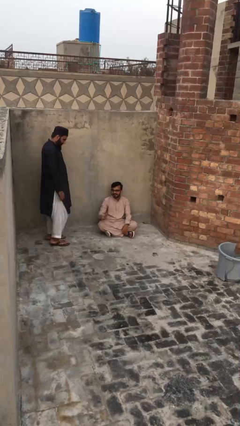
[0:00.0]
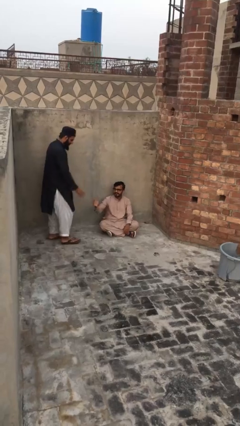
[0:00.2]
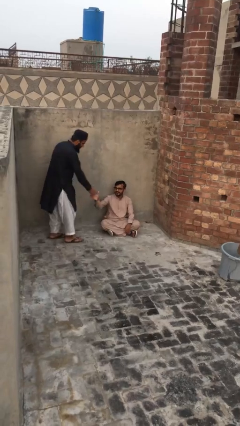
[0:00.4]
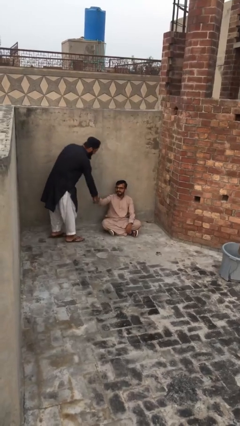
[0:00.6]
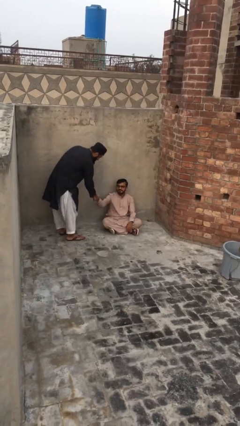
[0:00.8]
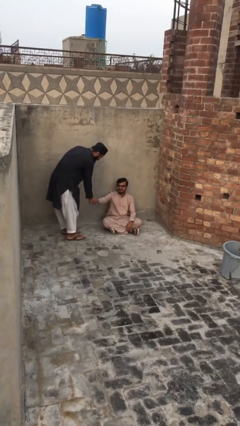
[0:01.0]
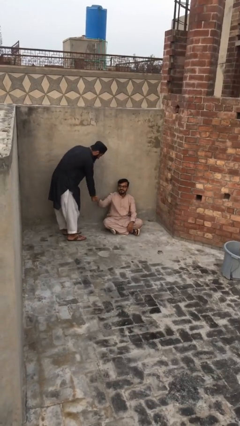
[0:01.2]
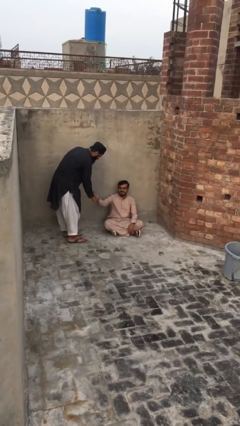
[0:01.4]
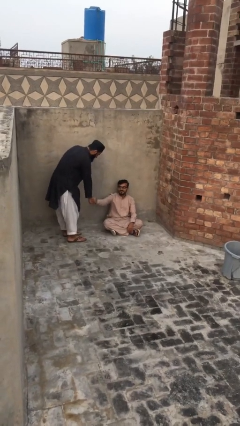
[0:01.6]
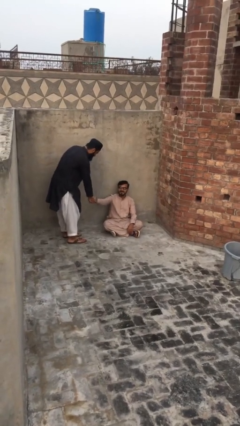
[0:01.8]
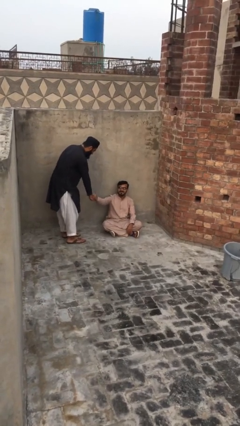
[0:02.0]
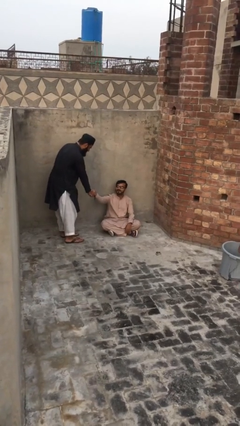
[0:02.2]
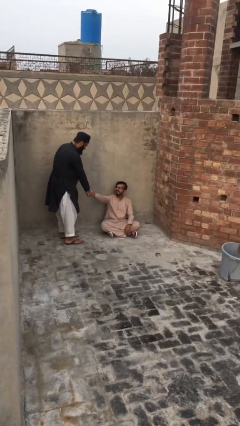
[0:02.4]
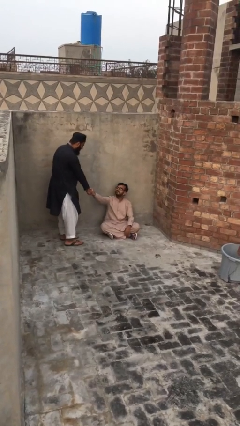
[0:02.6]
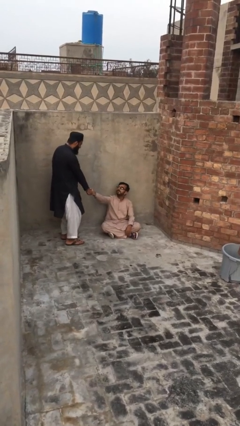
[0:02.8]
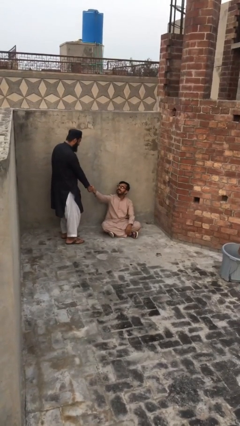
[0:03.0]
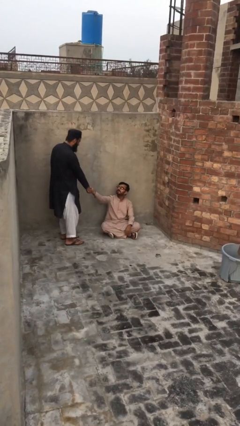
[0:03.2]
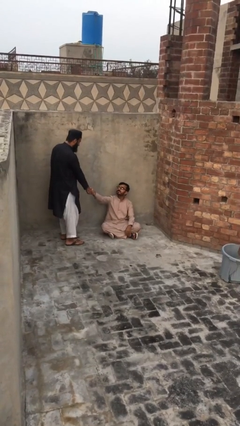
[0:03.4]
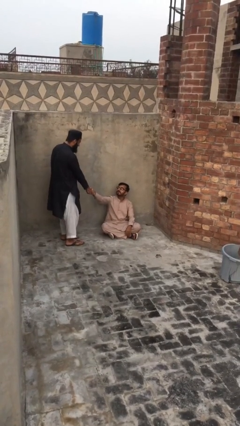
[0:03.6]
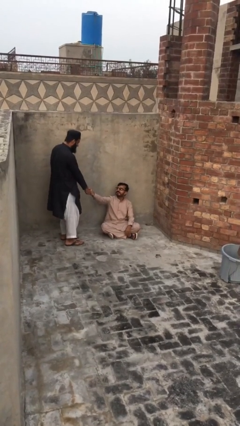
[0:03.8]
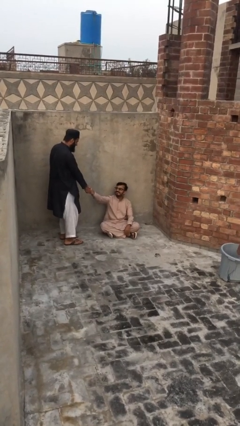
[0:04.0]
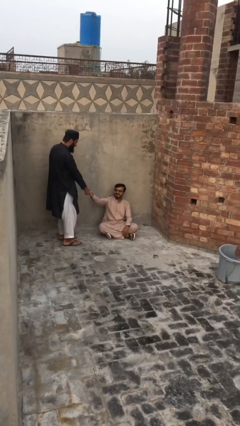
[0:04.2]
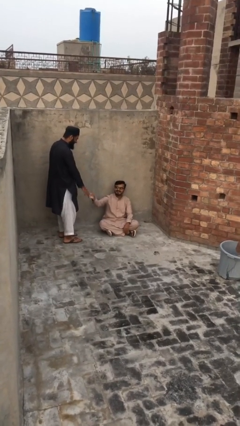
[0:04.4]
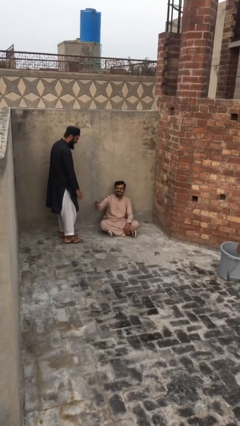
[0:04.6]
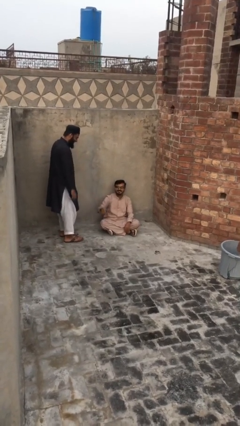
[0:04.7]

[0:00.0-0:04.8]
person shakes hand

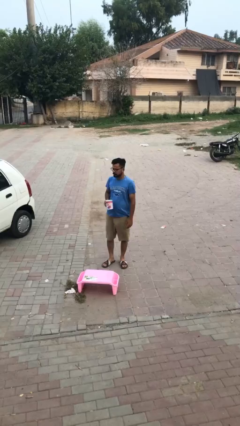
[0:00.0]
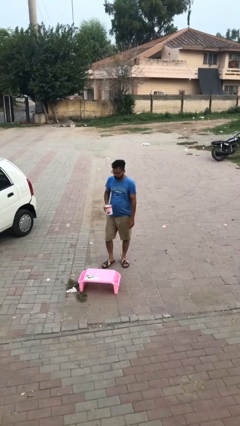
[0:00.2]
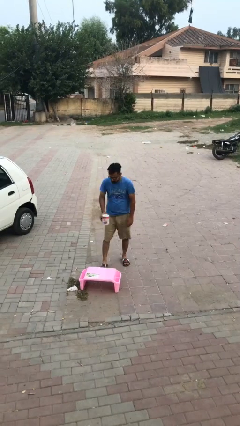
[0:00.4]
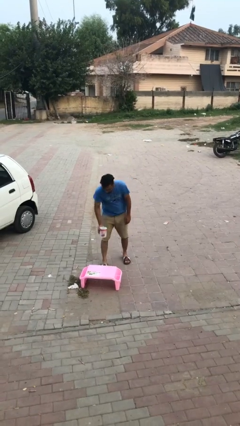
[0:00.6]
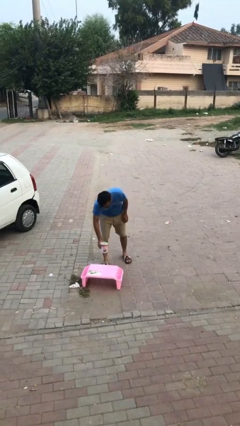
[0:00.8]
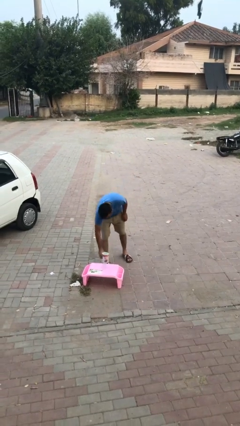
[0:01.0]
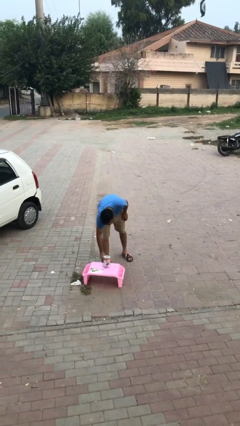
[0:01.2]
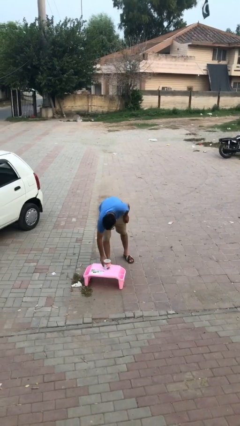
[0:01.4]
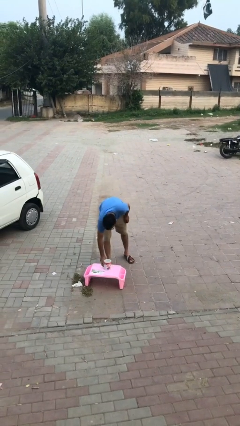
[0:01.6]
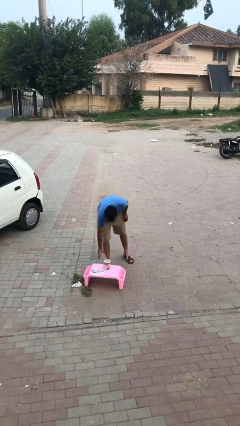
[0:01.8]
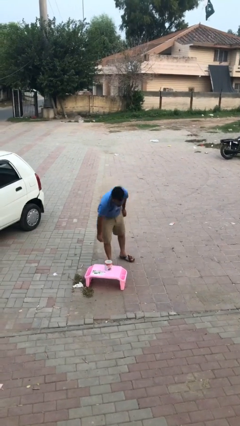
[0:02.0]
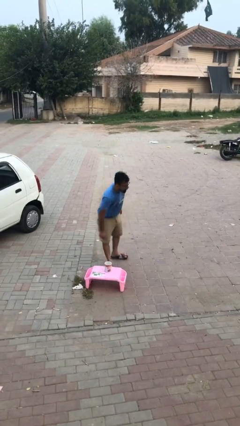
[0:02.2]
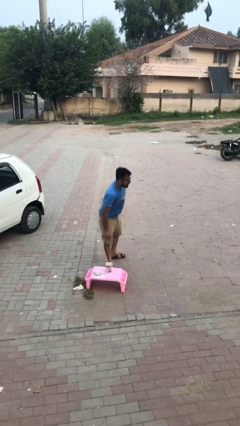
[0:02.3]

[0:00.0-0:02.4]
person puts down object on table

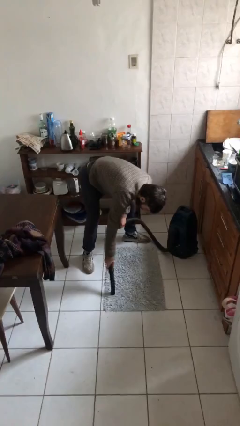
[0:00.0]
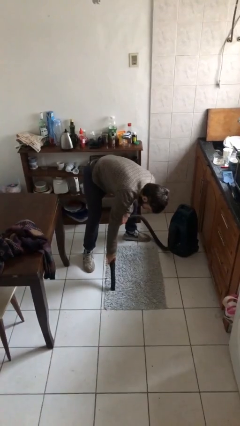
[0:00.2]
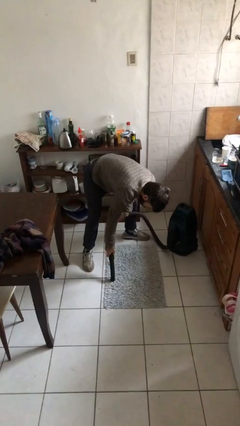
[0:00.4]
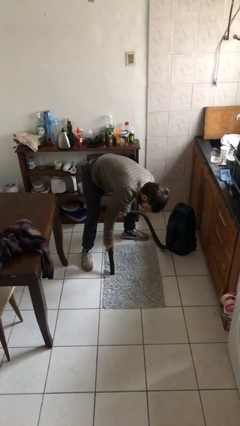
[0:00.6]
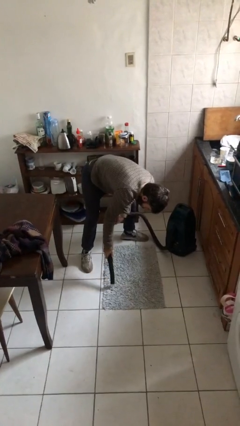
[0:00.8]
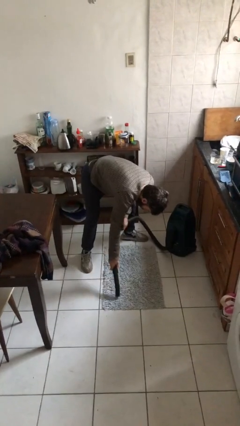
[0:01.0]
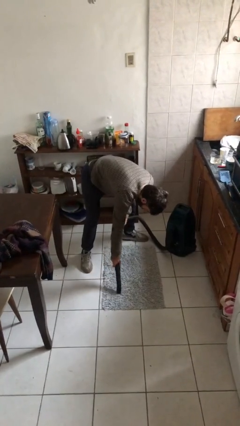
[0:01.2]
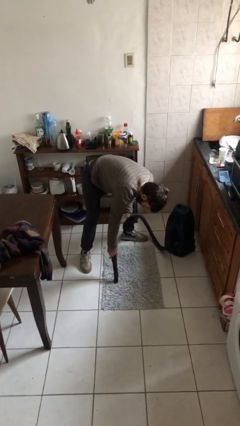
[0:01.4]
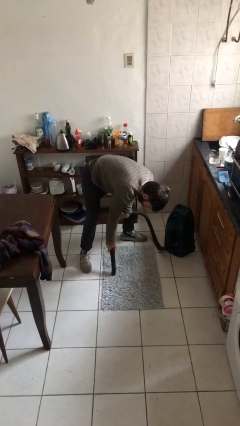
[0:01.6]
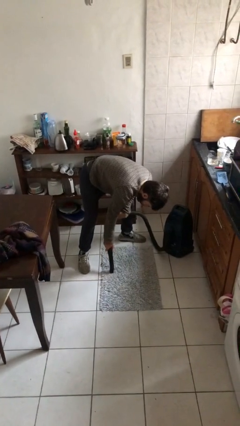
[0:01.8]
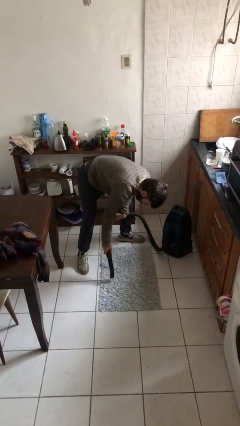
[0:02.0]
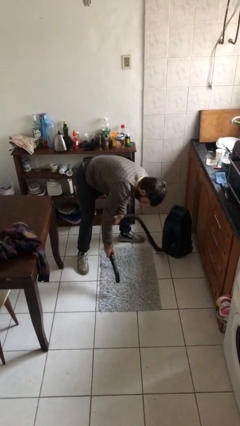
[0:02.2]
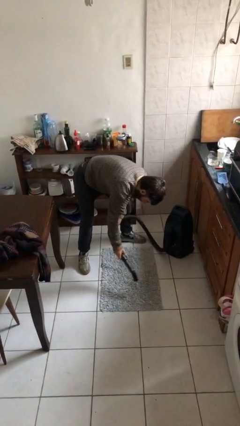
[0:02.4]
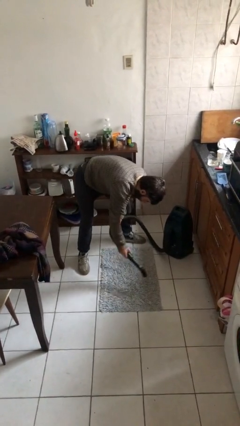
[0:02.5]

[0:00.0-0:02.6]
person vacuums carpet

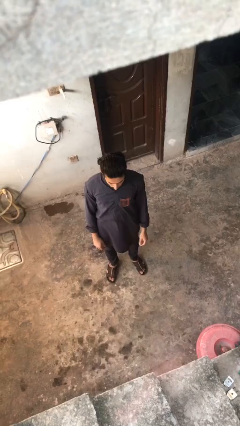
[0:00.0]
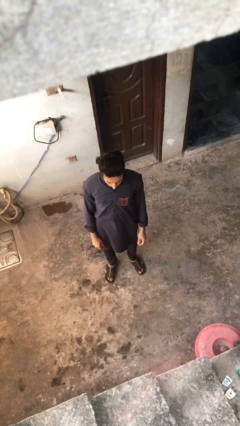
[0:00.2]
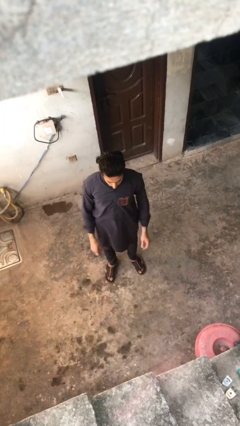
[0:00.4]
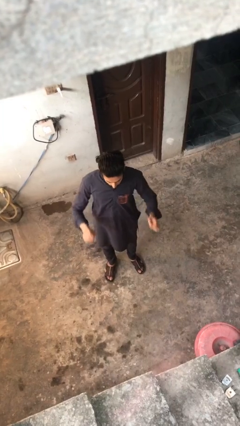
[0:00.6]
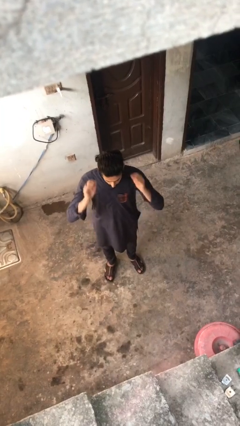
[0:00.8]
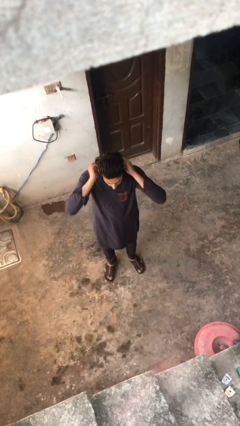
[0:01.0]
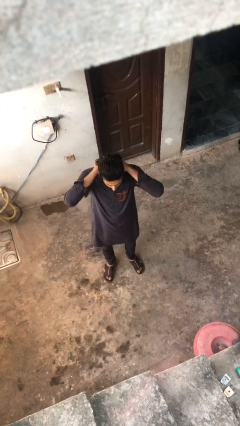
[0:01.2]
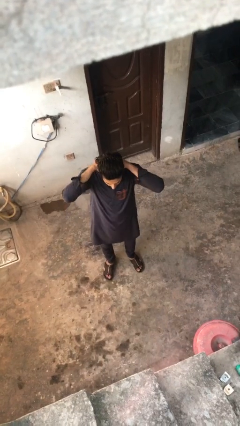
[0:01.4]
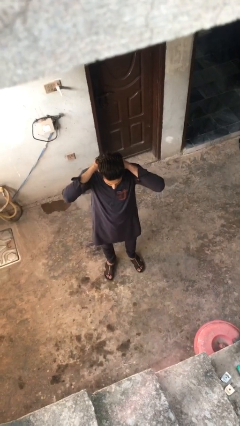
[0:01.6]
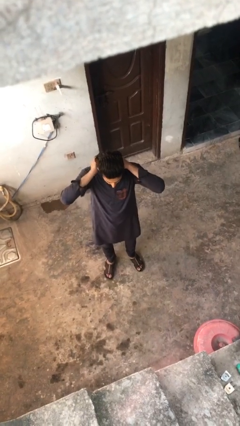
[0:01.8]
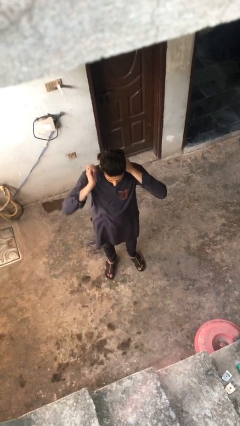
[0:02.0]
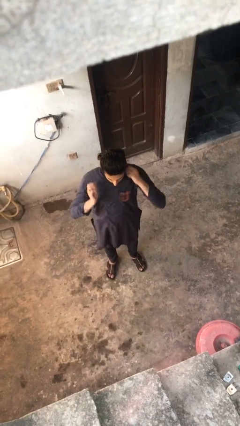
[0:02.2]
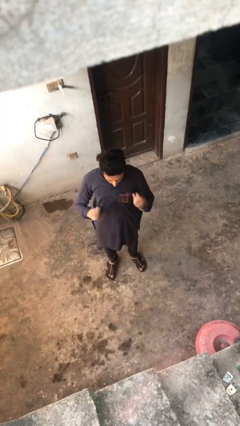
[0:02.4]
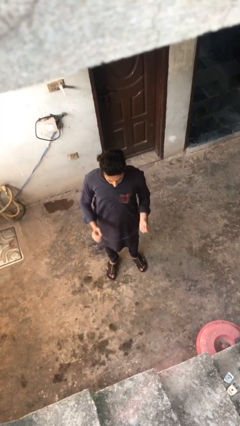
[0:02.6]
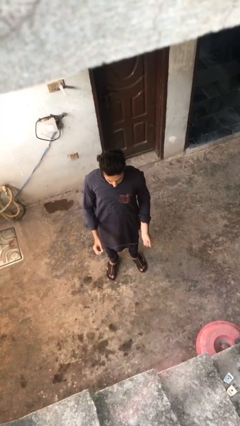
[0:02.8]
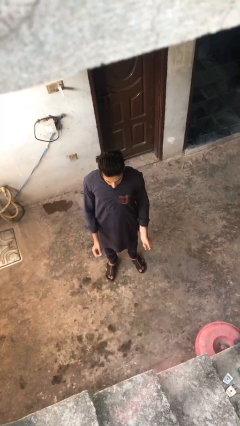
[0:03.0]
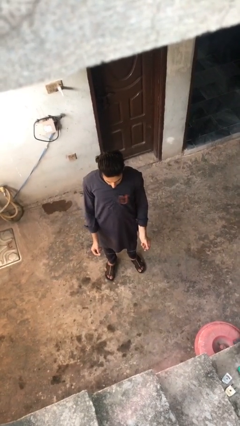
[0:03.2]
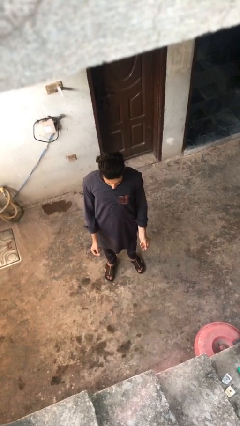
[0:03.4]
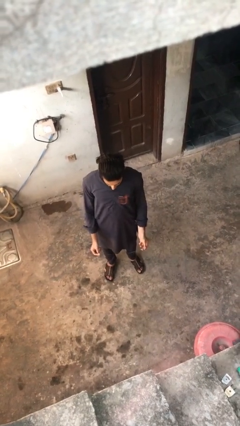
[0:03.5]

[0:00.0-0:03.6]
person takes off necklace

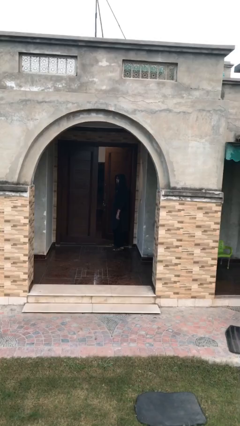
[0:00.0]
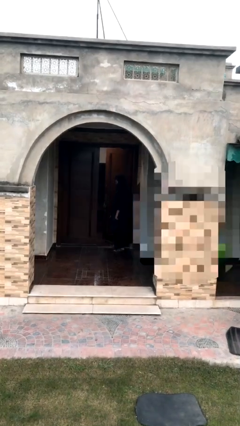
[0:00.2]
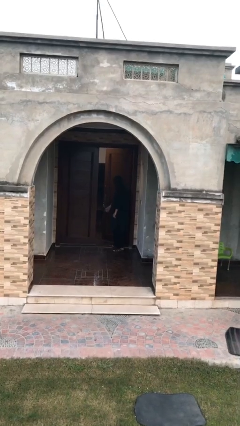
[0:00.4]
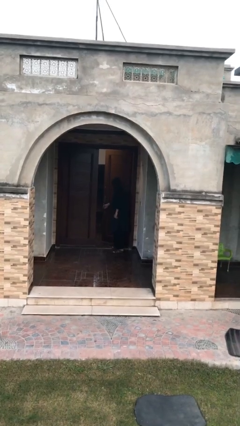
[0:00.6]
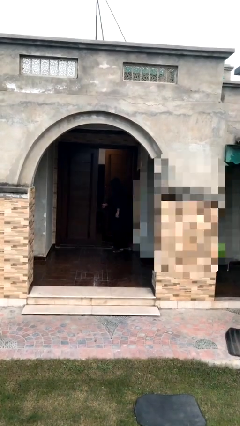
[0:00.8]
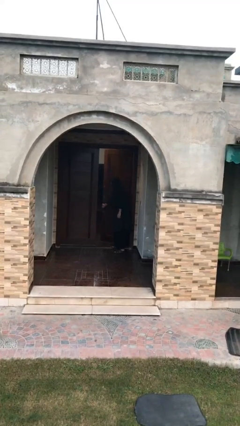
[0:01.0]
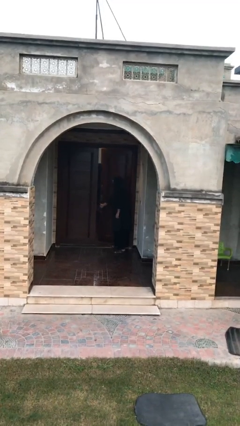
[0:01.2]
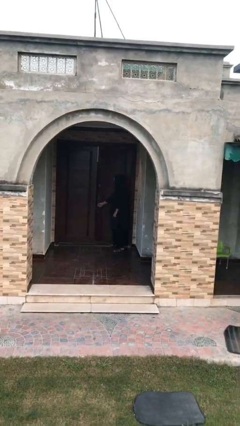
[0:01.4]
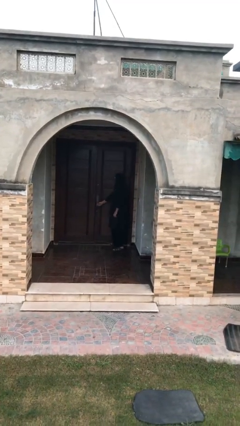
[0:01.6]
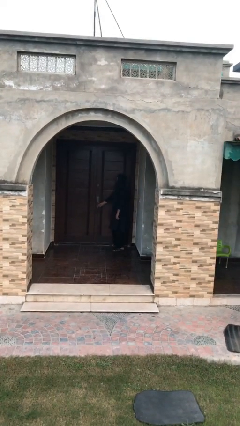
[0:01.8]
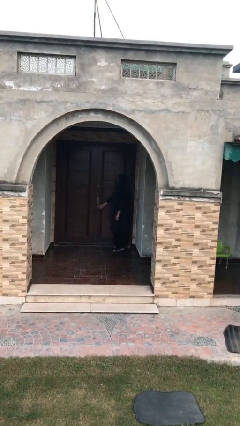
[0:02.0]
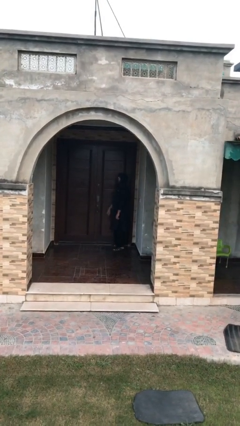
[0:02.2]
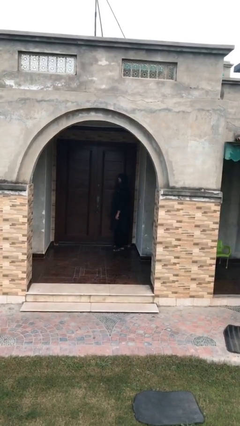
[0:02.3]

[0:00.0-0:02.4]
person closes facility door

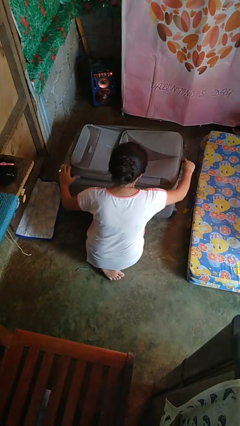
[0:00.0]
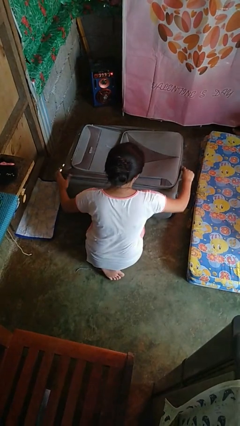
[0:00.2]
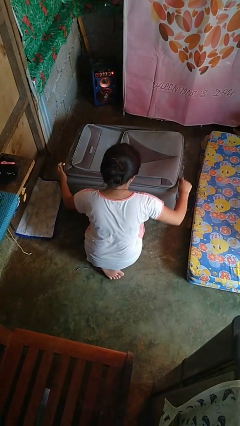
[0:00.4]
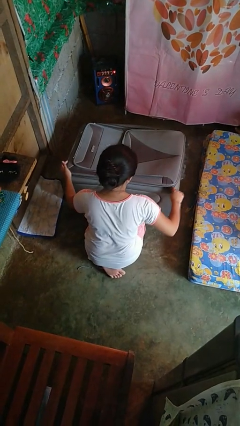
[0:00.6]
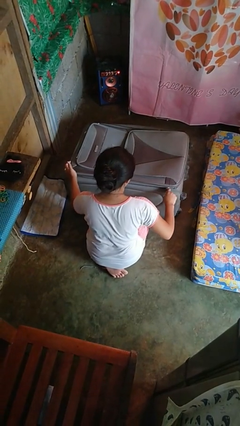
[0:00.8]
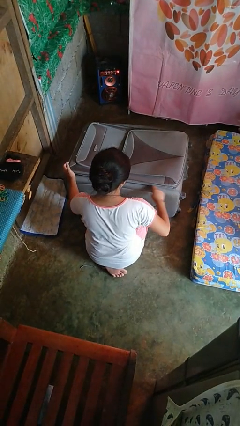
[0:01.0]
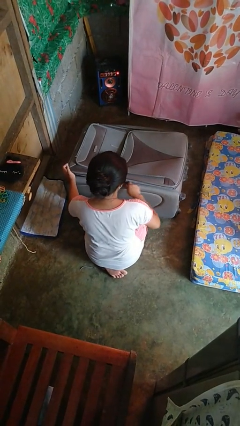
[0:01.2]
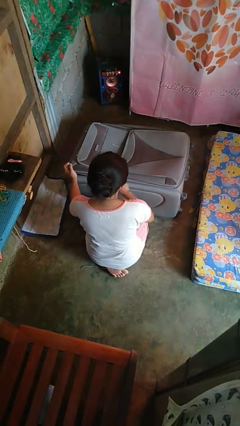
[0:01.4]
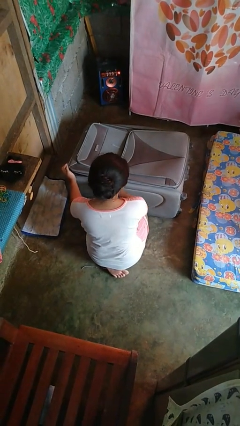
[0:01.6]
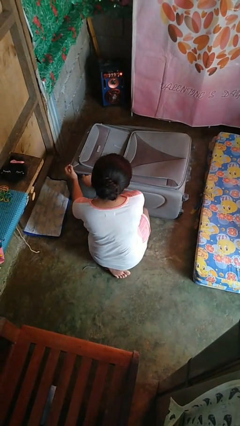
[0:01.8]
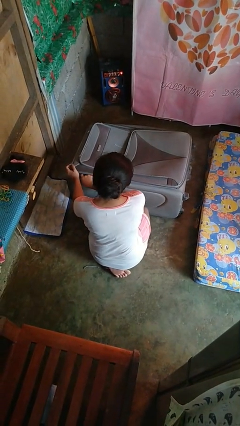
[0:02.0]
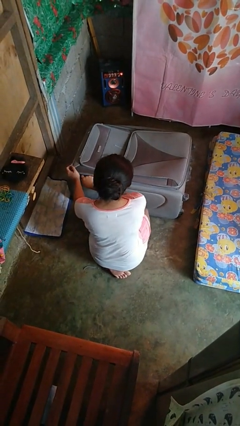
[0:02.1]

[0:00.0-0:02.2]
person closes suitcase
